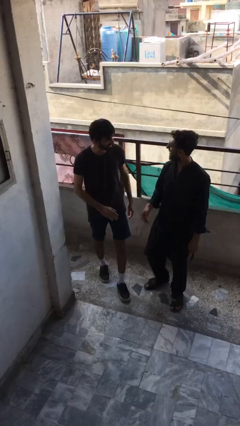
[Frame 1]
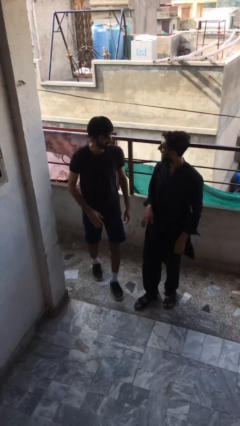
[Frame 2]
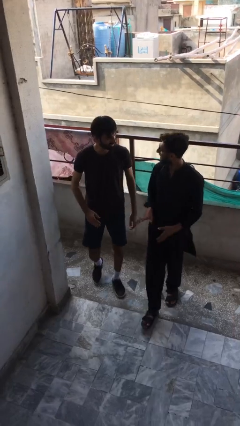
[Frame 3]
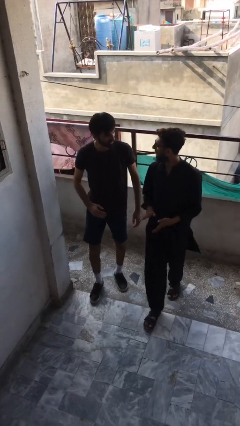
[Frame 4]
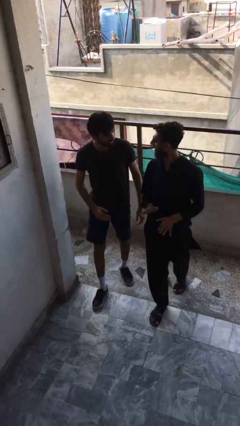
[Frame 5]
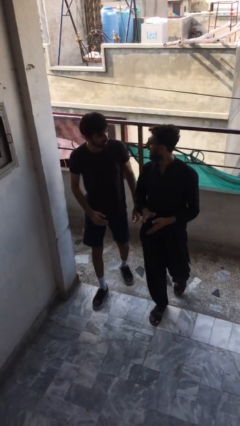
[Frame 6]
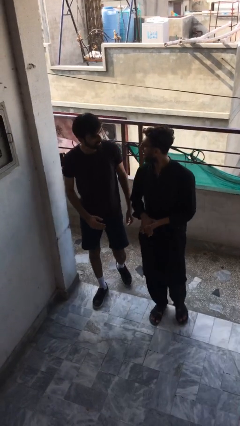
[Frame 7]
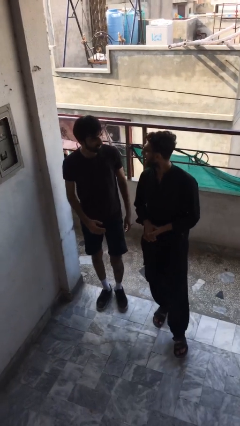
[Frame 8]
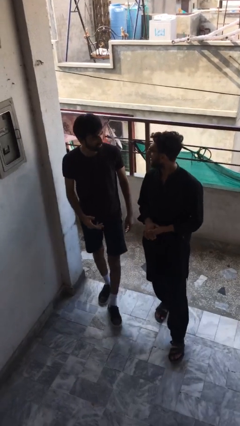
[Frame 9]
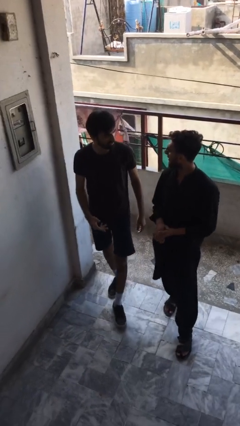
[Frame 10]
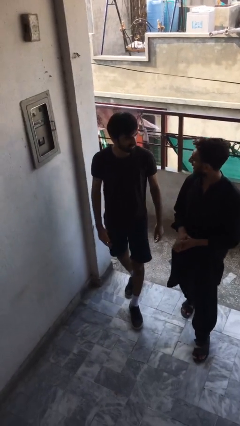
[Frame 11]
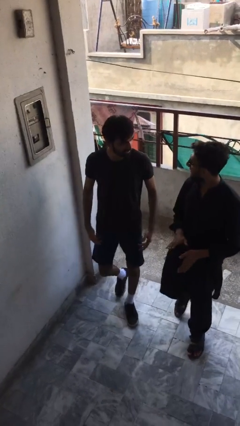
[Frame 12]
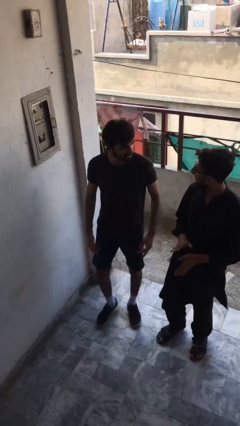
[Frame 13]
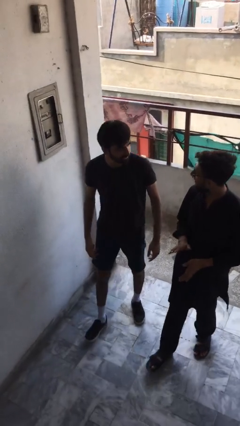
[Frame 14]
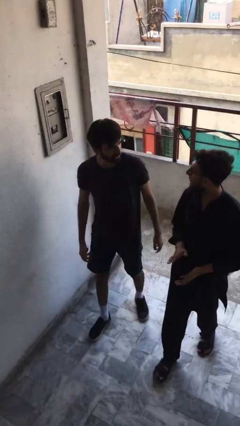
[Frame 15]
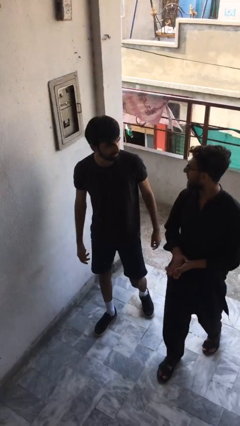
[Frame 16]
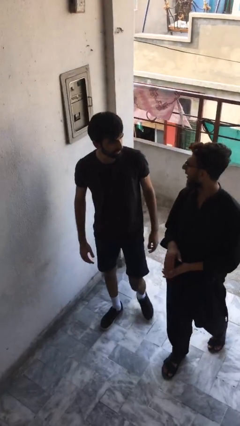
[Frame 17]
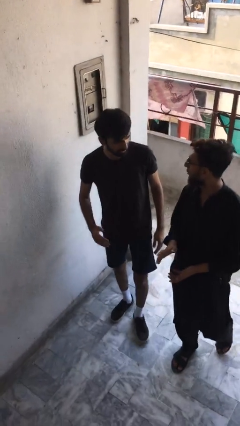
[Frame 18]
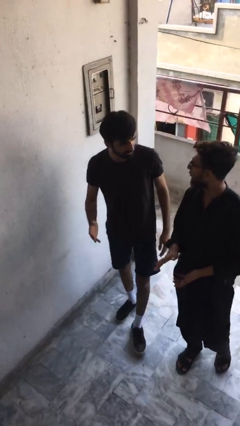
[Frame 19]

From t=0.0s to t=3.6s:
person talks to person

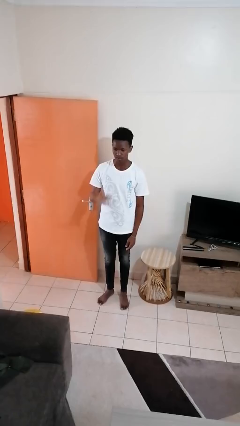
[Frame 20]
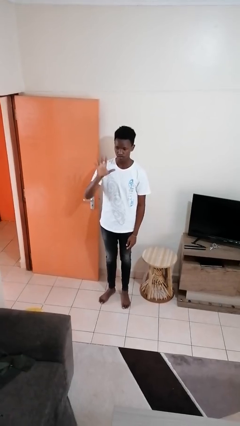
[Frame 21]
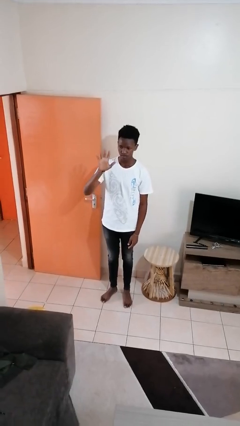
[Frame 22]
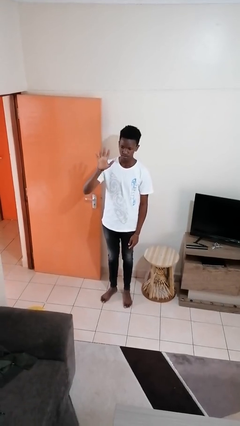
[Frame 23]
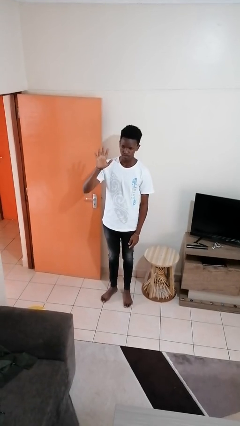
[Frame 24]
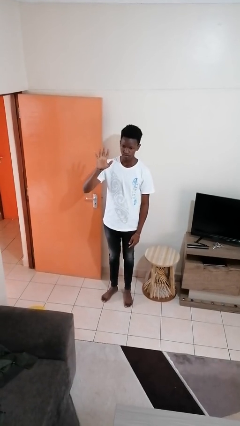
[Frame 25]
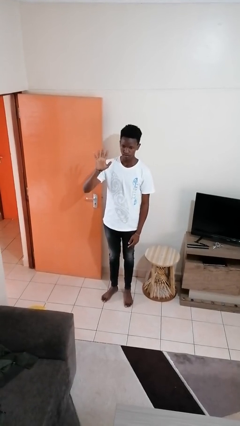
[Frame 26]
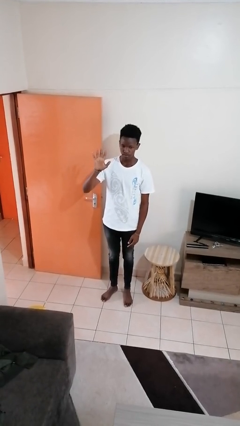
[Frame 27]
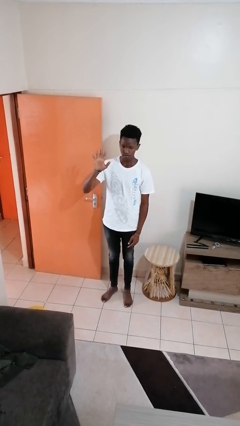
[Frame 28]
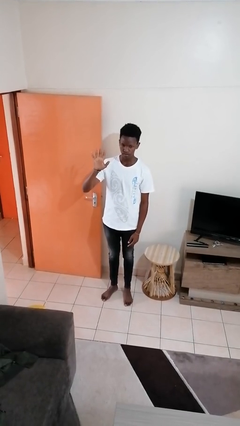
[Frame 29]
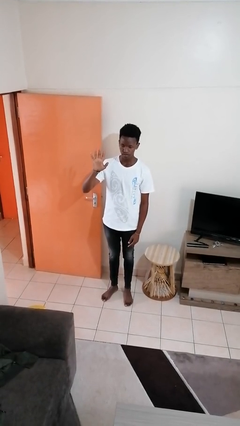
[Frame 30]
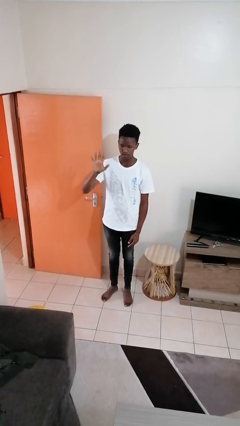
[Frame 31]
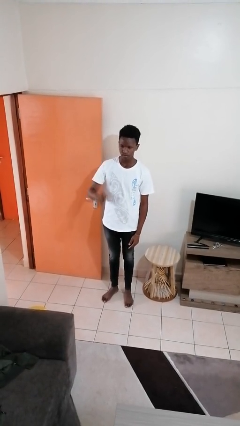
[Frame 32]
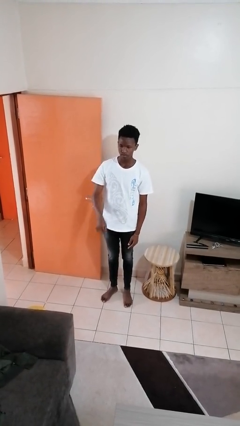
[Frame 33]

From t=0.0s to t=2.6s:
person gestures number five

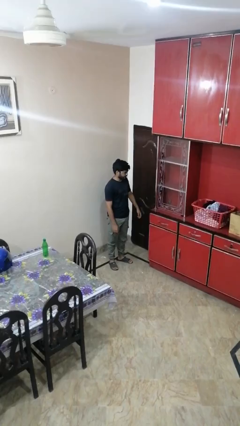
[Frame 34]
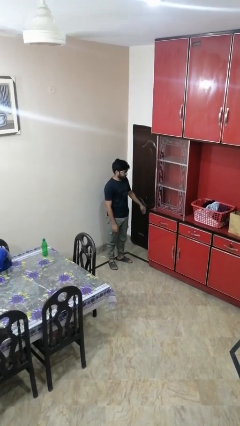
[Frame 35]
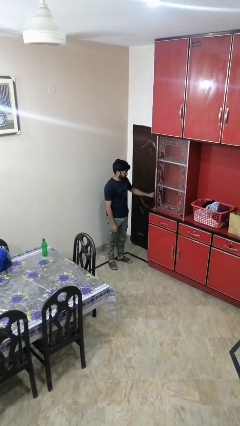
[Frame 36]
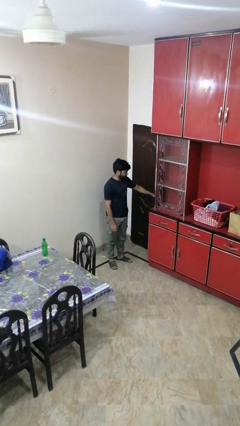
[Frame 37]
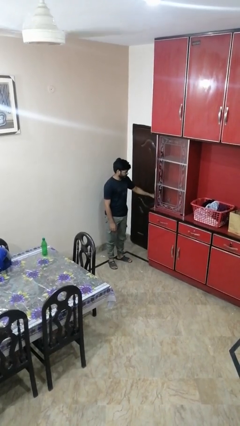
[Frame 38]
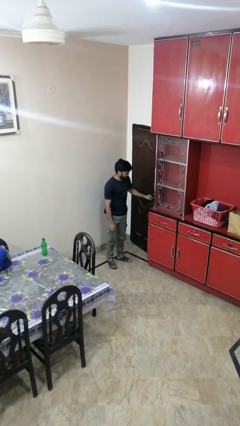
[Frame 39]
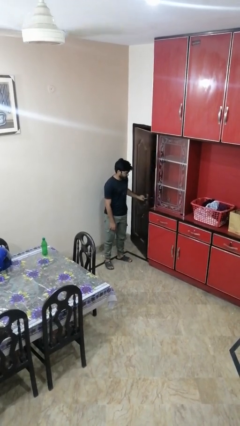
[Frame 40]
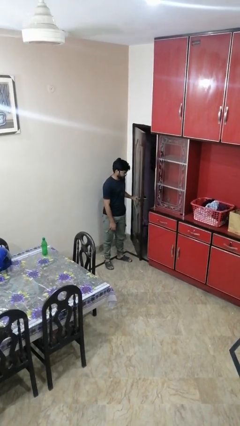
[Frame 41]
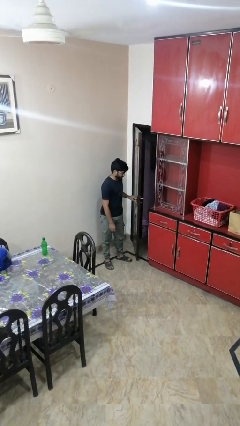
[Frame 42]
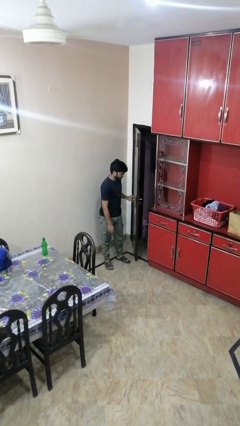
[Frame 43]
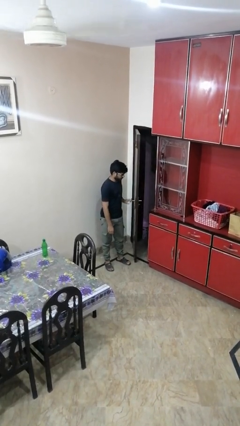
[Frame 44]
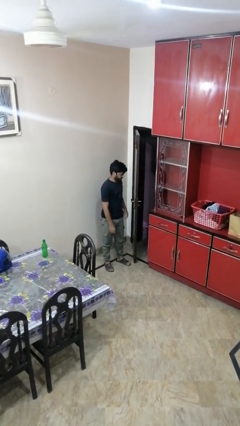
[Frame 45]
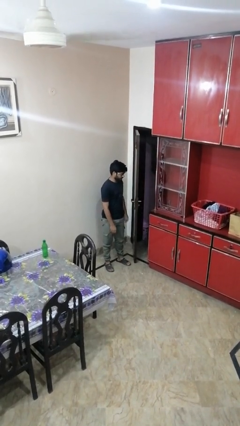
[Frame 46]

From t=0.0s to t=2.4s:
person opens facility door

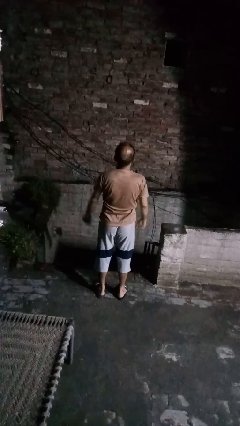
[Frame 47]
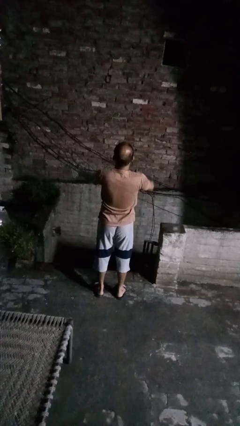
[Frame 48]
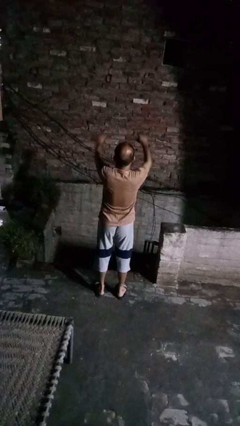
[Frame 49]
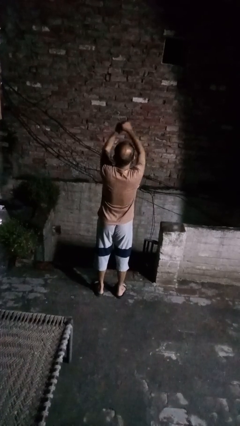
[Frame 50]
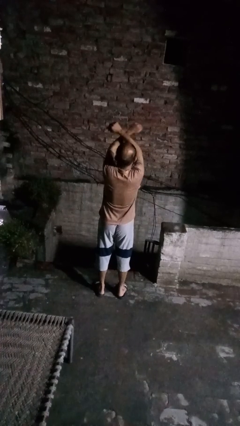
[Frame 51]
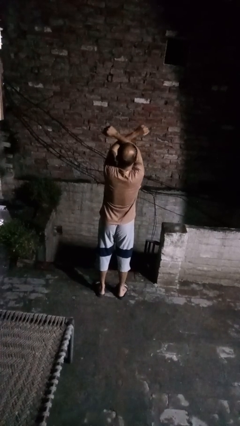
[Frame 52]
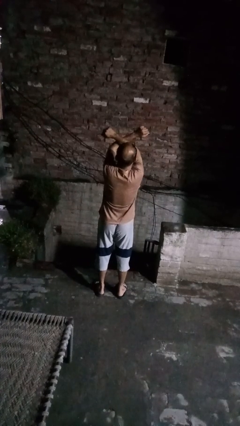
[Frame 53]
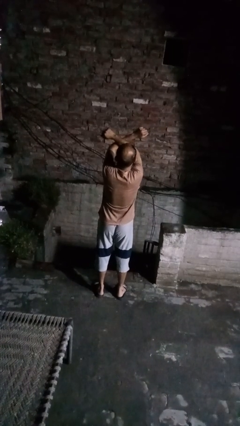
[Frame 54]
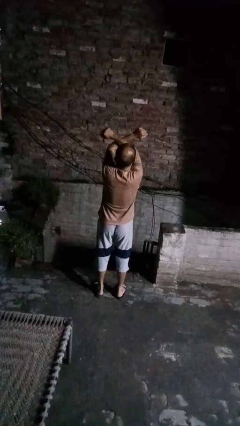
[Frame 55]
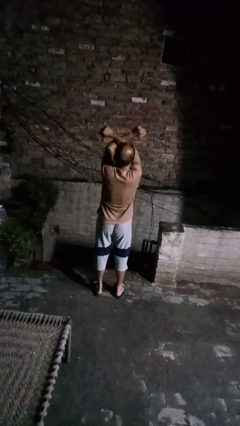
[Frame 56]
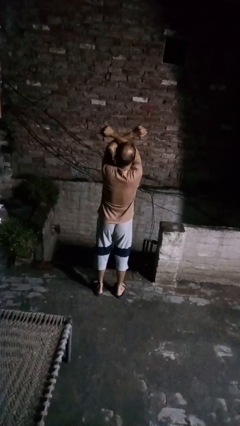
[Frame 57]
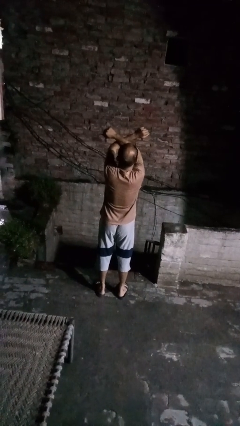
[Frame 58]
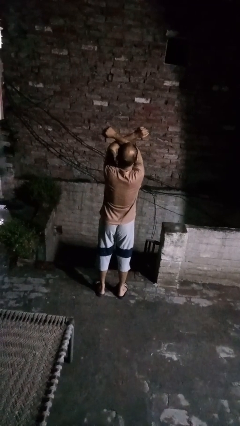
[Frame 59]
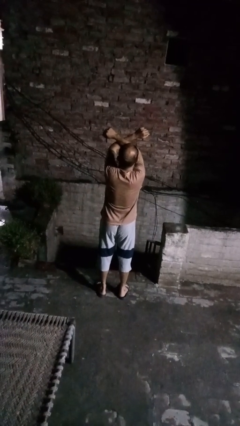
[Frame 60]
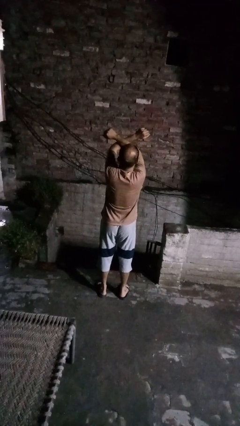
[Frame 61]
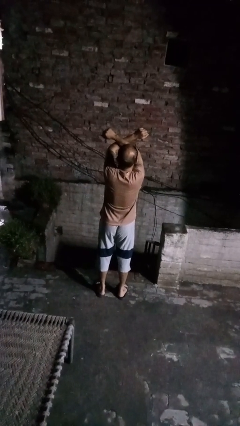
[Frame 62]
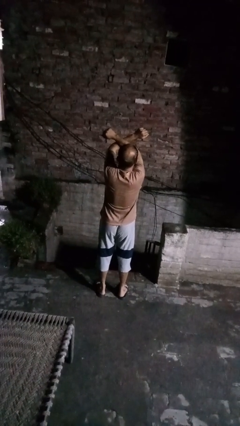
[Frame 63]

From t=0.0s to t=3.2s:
person gestures arms x

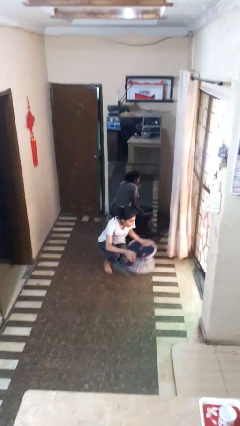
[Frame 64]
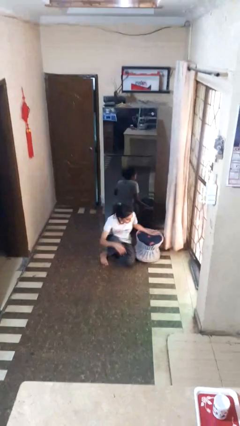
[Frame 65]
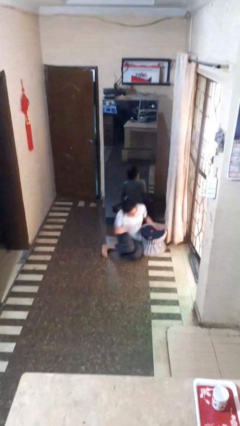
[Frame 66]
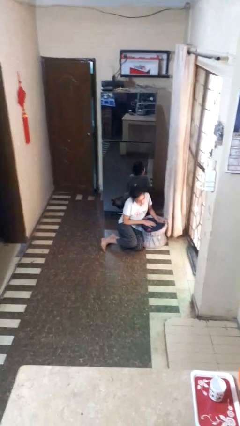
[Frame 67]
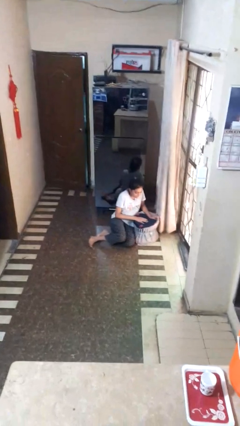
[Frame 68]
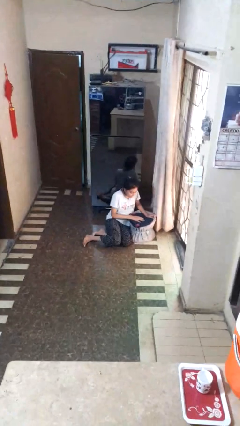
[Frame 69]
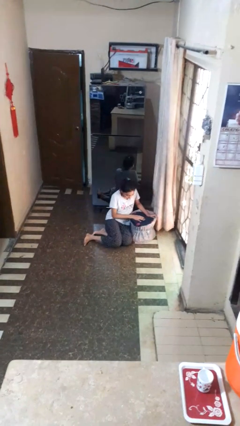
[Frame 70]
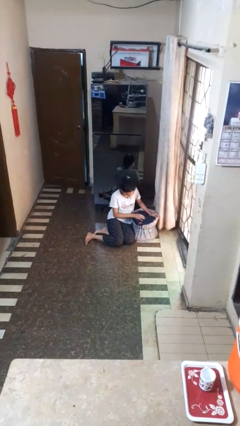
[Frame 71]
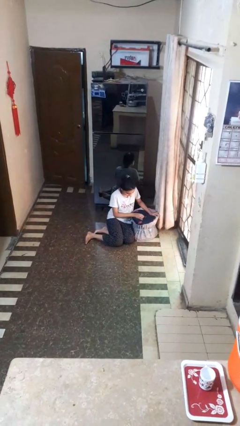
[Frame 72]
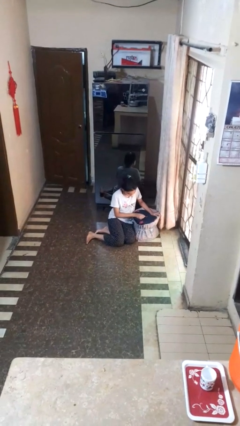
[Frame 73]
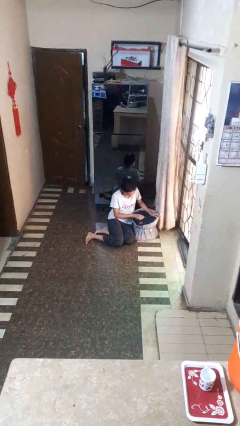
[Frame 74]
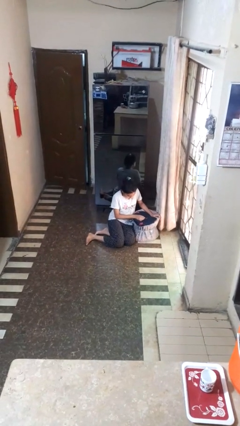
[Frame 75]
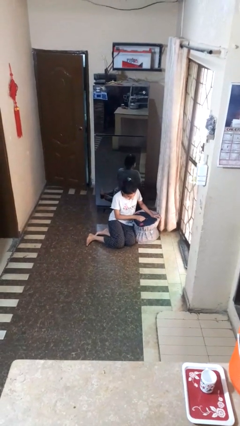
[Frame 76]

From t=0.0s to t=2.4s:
person lies down on floor

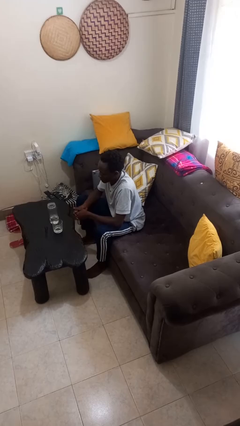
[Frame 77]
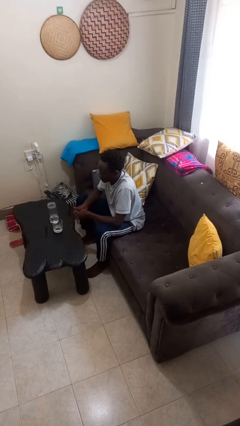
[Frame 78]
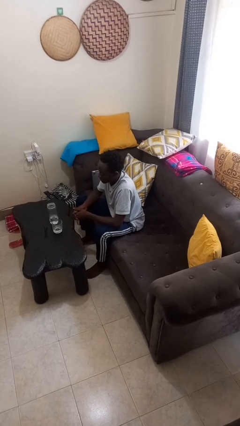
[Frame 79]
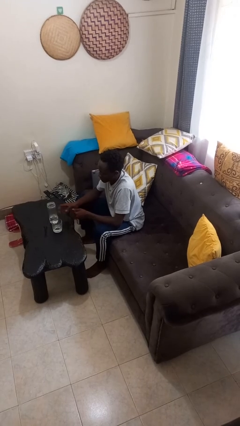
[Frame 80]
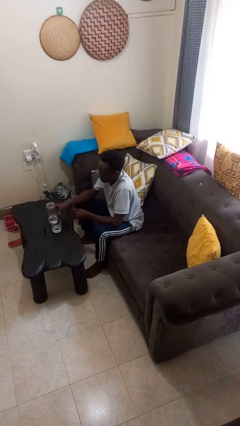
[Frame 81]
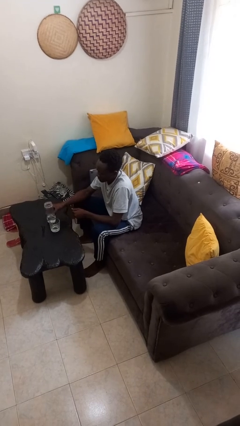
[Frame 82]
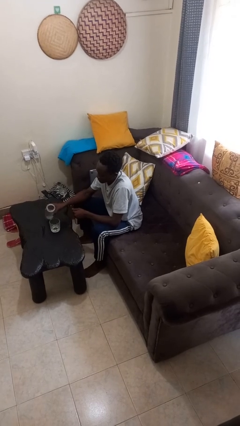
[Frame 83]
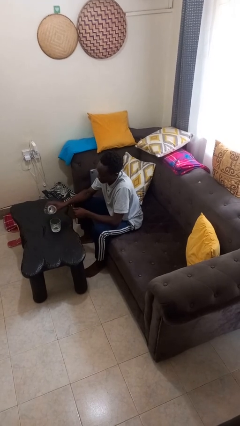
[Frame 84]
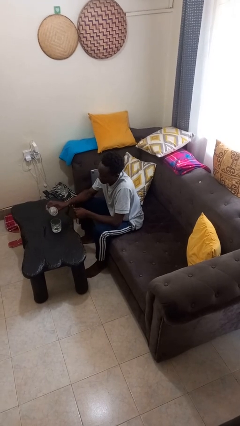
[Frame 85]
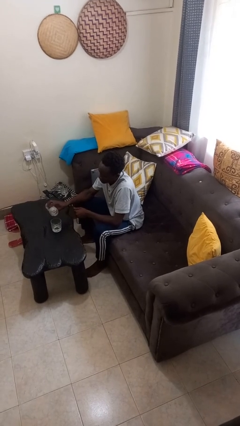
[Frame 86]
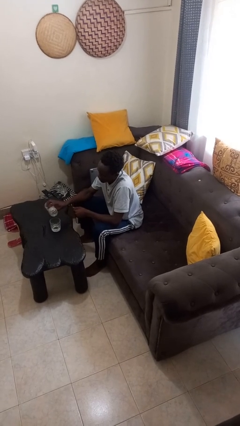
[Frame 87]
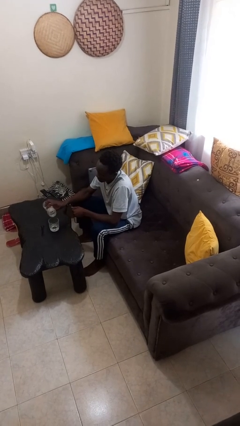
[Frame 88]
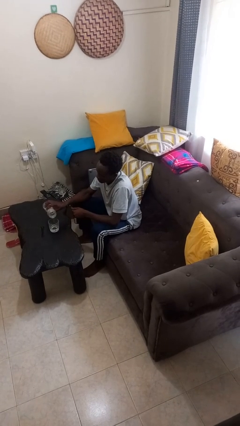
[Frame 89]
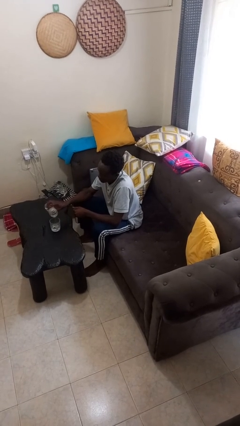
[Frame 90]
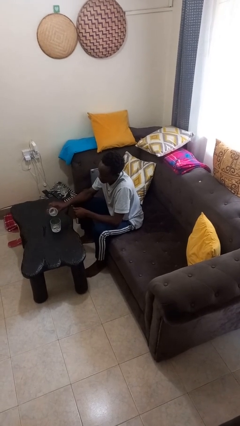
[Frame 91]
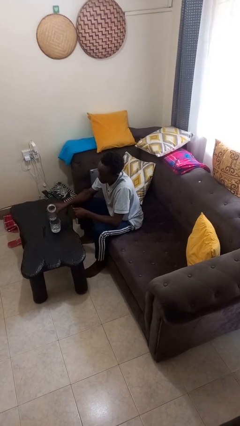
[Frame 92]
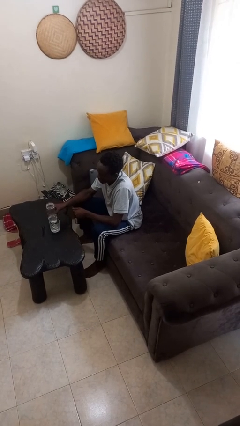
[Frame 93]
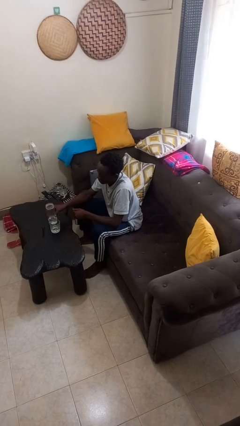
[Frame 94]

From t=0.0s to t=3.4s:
person pours liquid into cup
